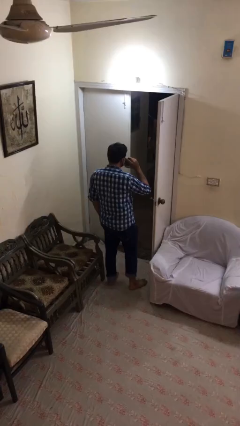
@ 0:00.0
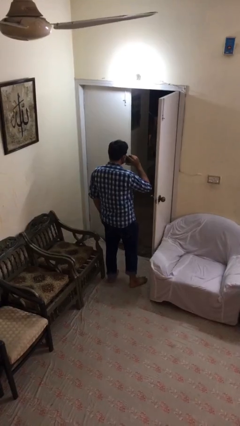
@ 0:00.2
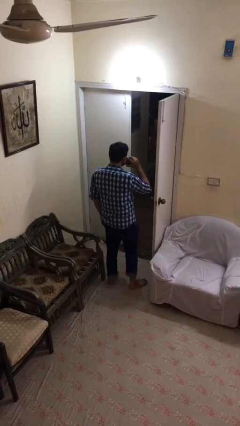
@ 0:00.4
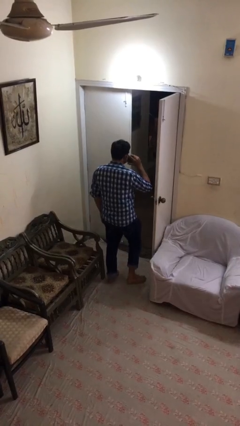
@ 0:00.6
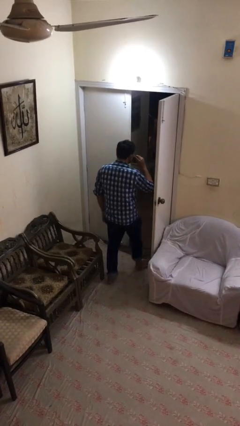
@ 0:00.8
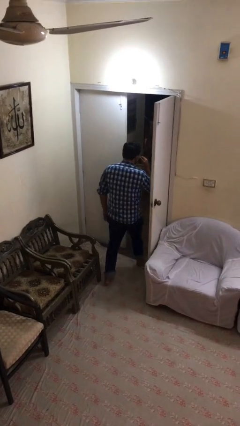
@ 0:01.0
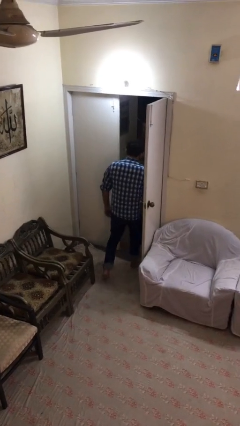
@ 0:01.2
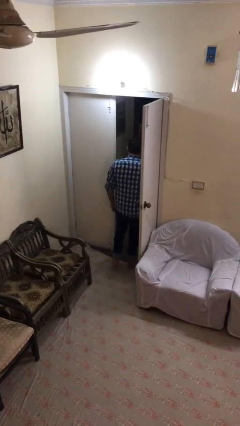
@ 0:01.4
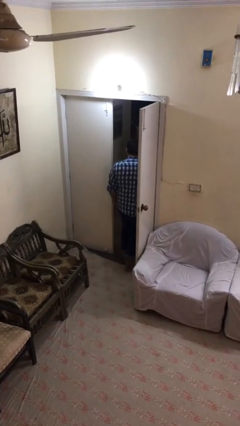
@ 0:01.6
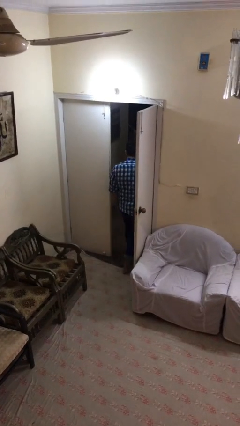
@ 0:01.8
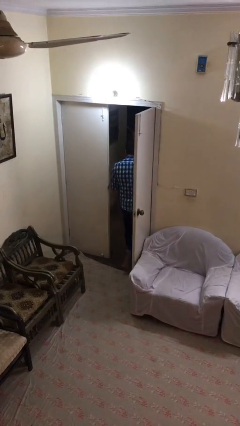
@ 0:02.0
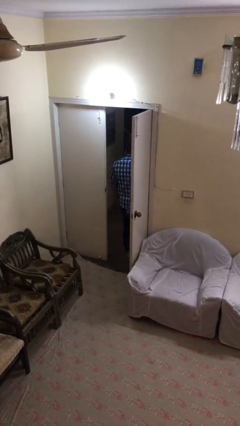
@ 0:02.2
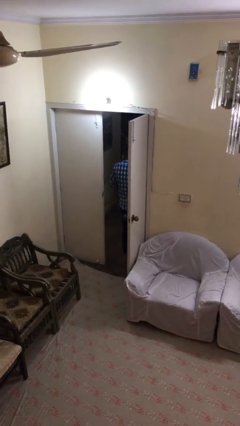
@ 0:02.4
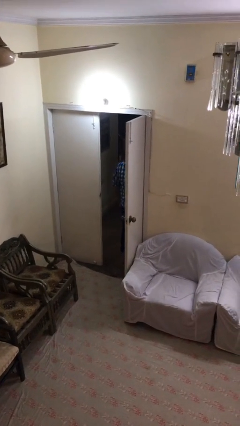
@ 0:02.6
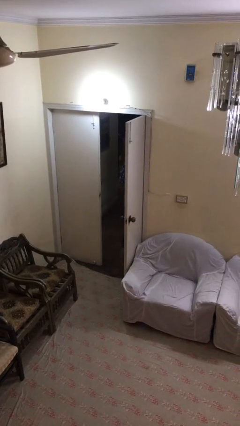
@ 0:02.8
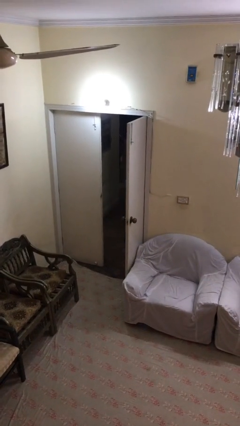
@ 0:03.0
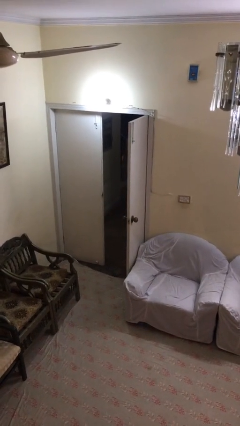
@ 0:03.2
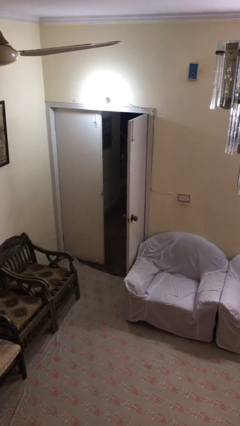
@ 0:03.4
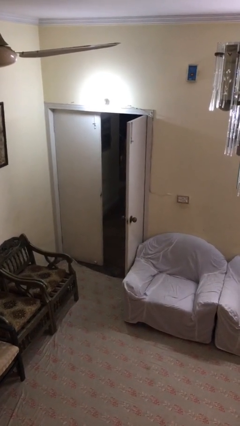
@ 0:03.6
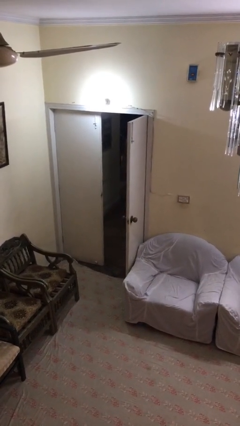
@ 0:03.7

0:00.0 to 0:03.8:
person exits scene through structure

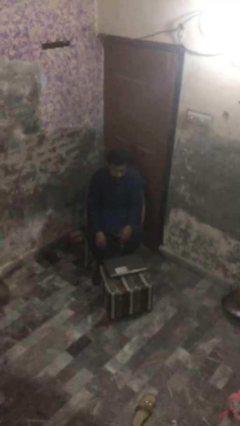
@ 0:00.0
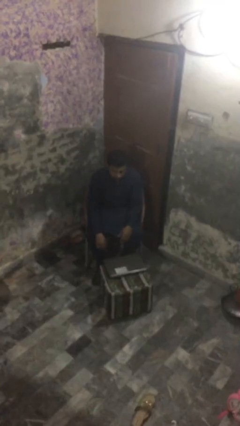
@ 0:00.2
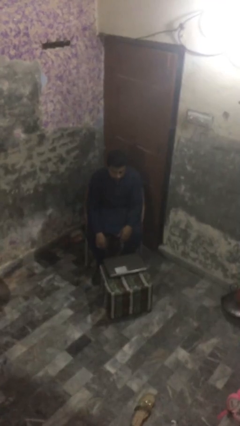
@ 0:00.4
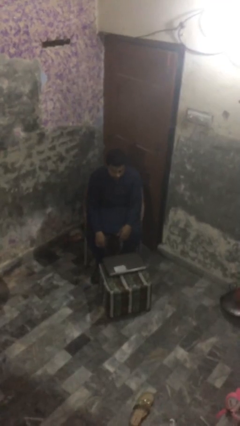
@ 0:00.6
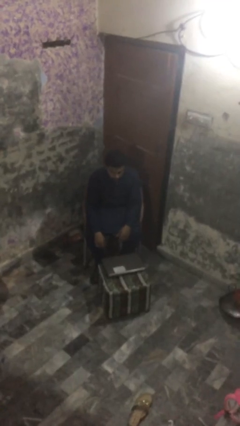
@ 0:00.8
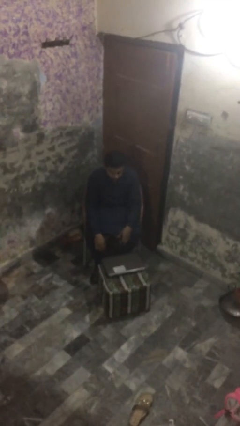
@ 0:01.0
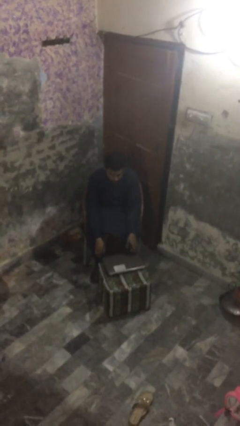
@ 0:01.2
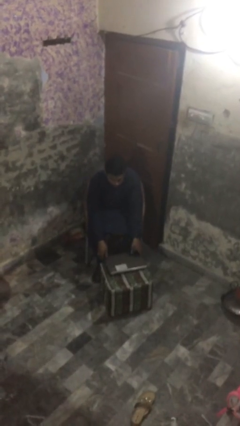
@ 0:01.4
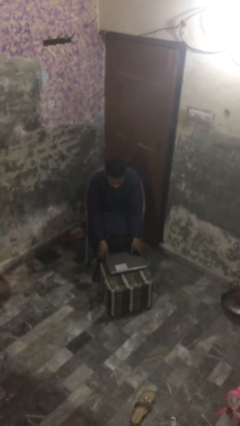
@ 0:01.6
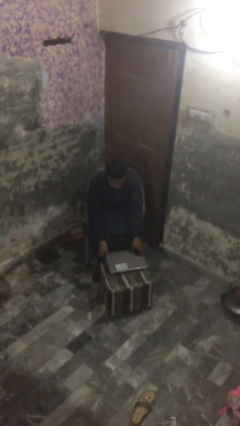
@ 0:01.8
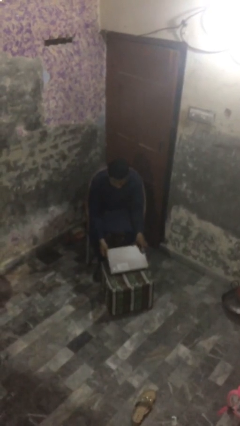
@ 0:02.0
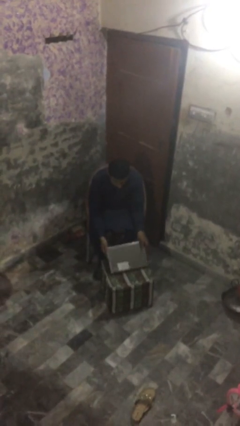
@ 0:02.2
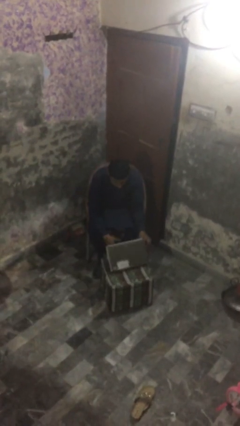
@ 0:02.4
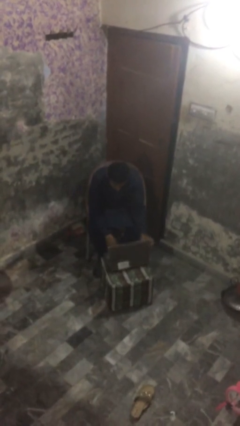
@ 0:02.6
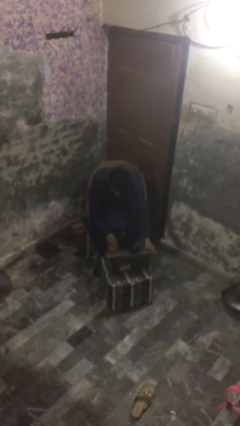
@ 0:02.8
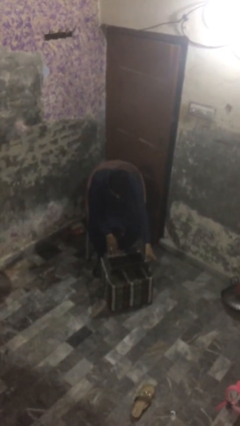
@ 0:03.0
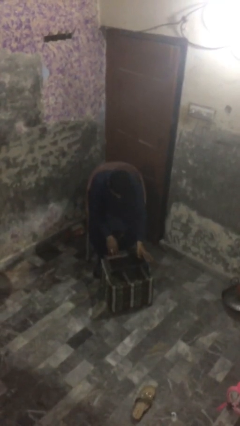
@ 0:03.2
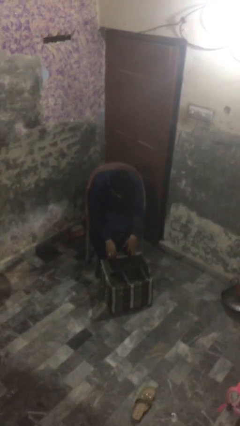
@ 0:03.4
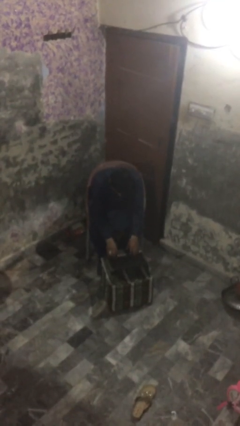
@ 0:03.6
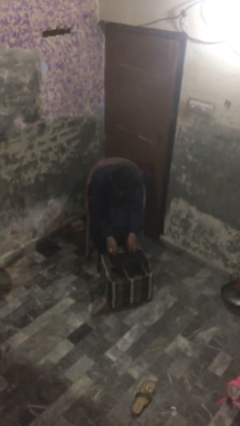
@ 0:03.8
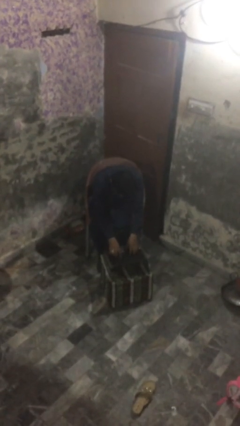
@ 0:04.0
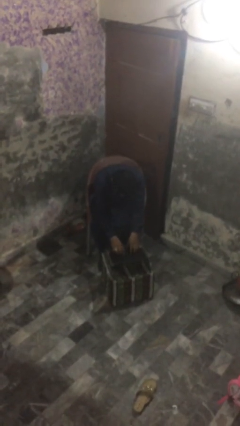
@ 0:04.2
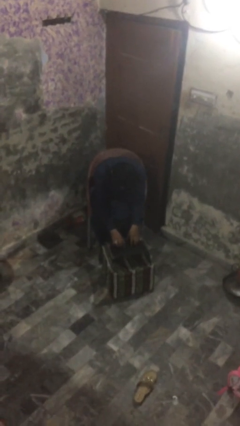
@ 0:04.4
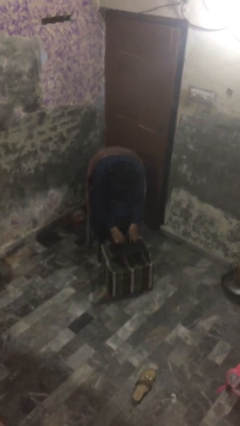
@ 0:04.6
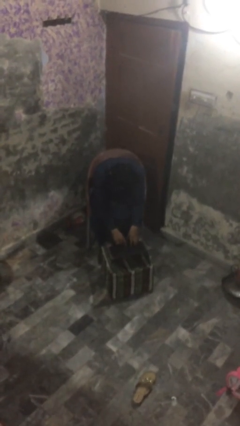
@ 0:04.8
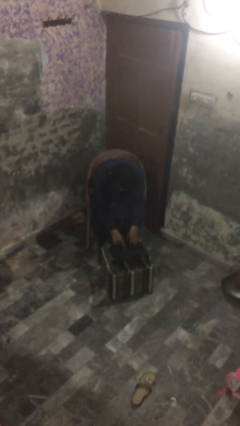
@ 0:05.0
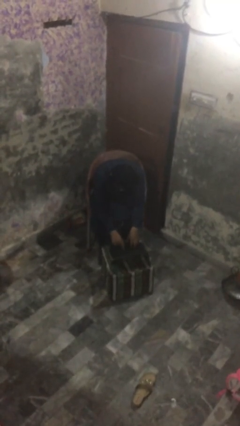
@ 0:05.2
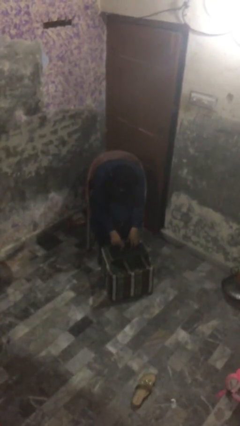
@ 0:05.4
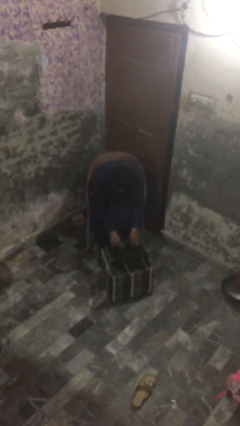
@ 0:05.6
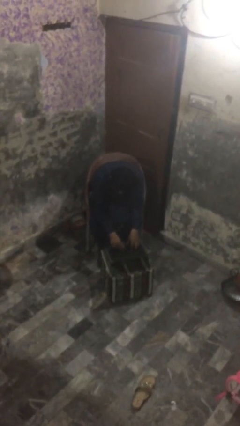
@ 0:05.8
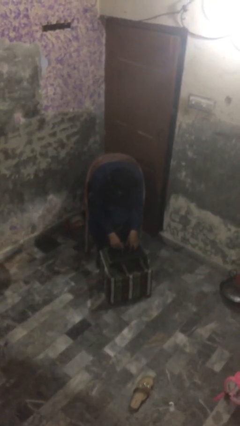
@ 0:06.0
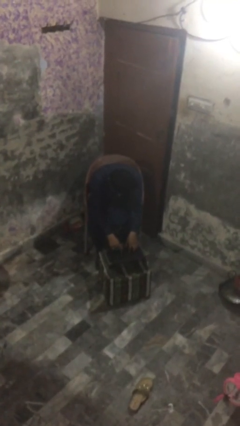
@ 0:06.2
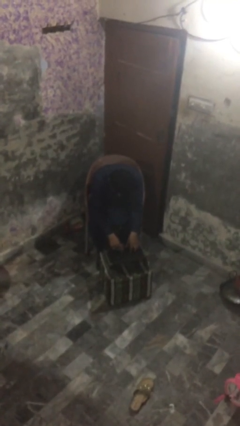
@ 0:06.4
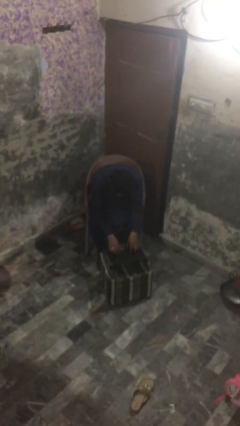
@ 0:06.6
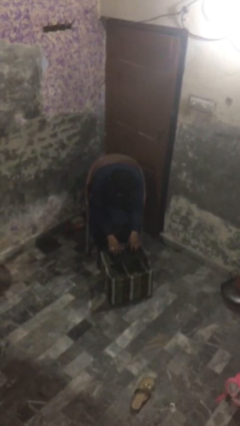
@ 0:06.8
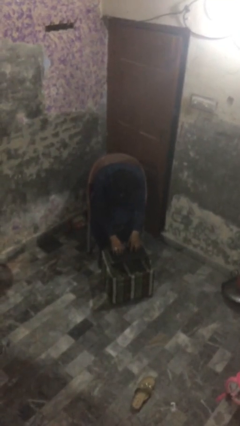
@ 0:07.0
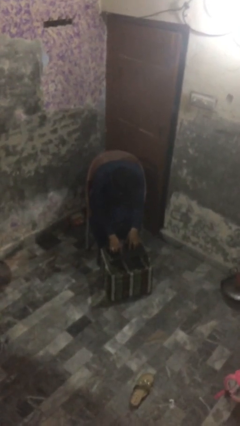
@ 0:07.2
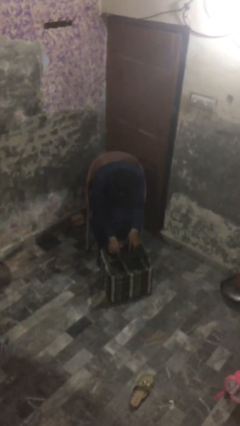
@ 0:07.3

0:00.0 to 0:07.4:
person interacts with laptop

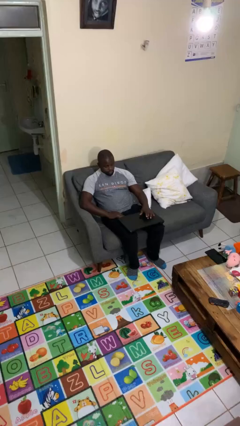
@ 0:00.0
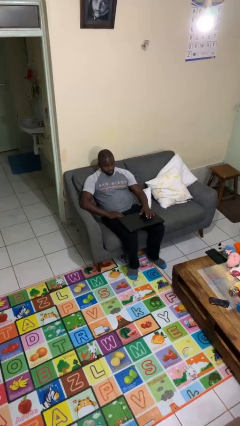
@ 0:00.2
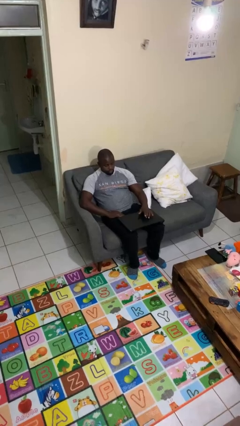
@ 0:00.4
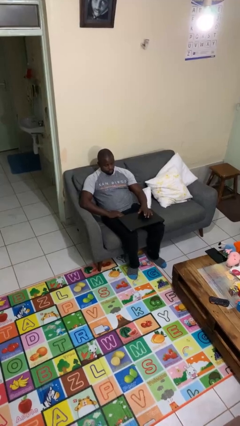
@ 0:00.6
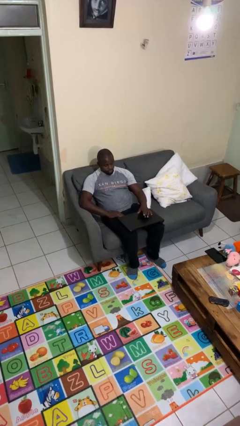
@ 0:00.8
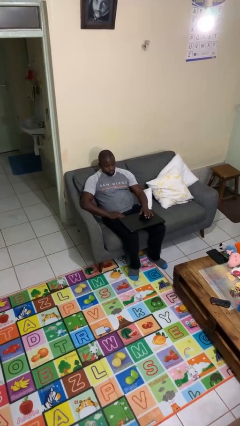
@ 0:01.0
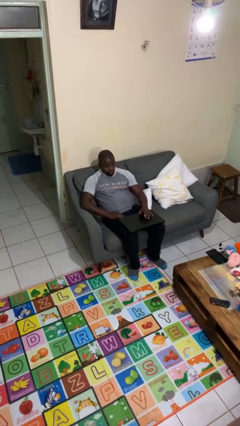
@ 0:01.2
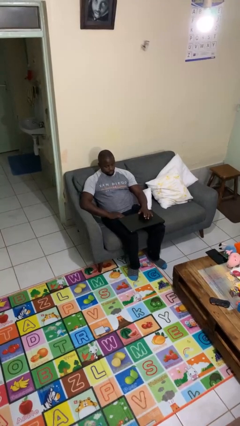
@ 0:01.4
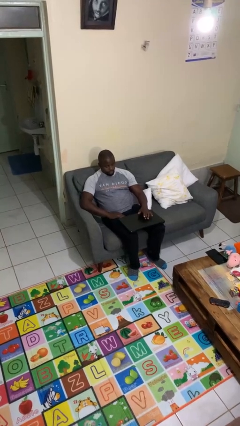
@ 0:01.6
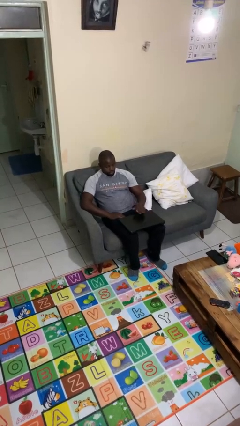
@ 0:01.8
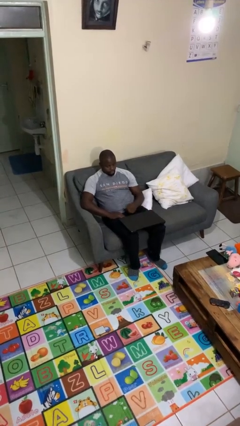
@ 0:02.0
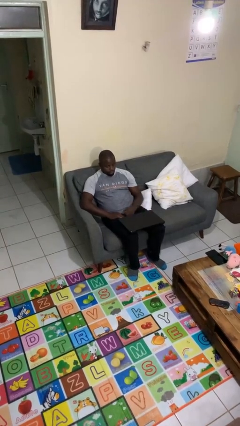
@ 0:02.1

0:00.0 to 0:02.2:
person taps object with finger

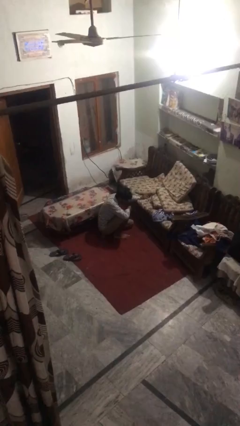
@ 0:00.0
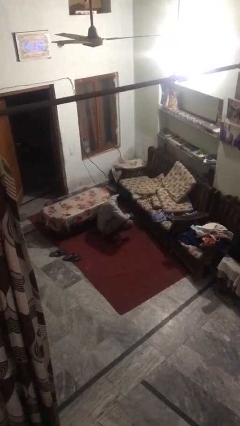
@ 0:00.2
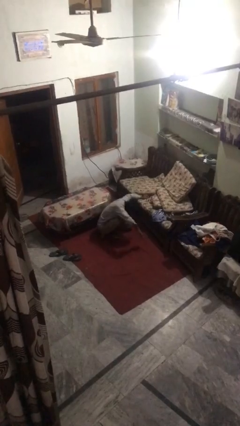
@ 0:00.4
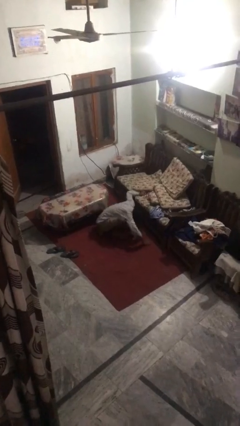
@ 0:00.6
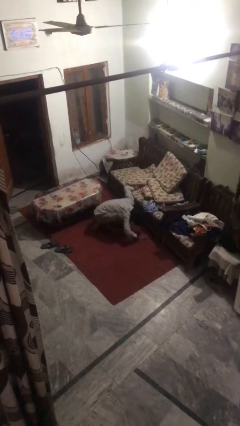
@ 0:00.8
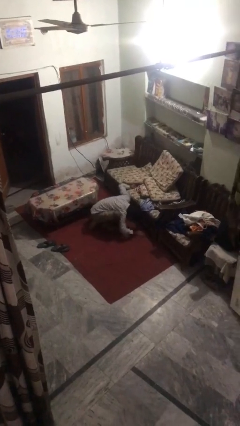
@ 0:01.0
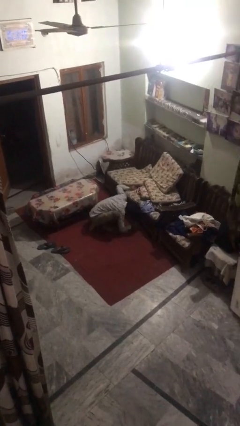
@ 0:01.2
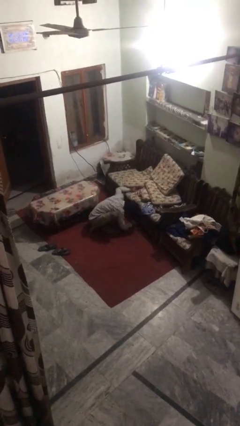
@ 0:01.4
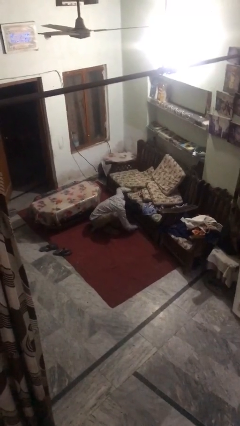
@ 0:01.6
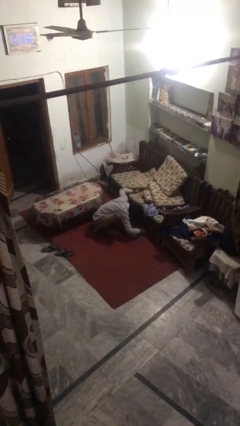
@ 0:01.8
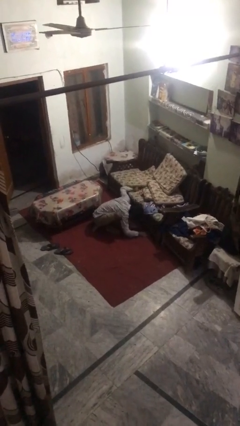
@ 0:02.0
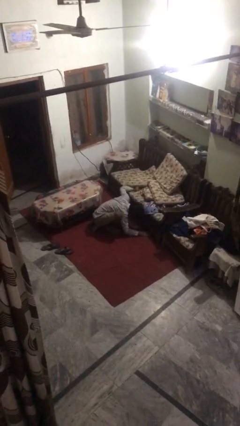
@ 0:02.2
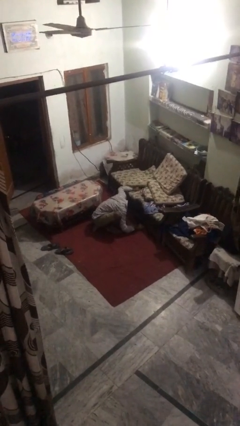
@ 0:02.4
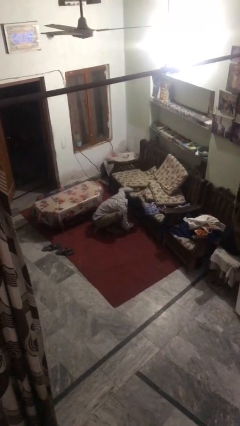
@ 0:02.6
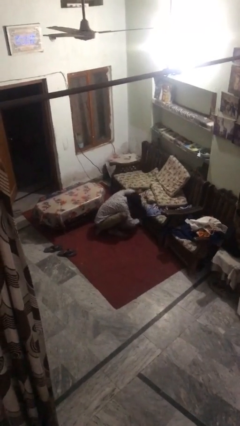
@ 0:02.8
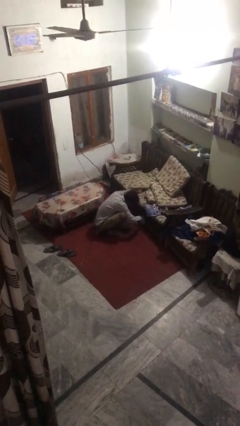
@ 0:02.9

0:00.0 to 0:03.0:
person searches under couch

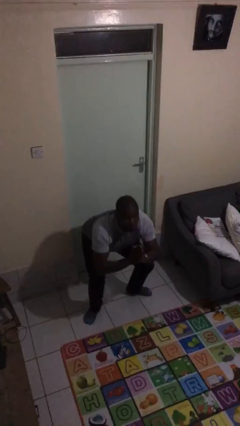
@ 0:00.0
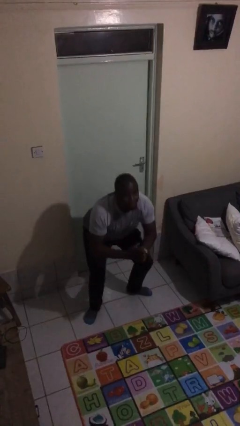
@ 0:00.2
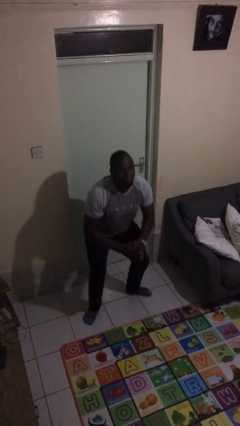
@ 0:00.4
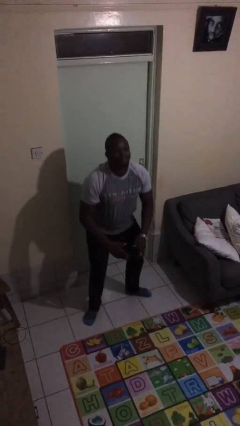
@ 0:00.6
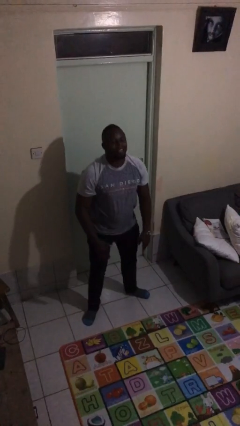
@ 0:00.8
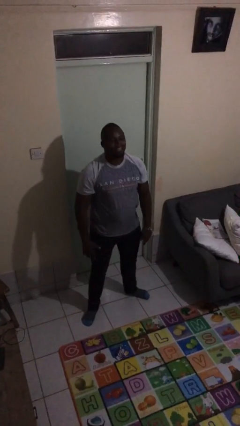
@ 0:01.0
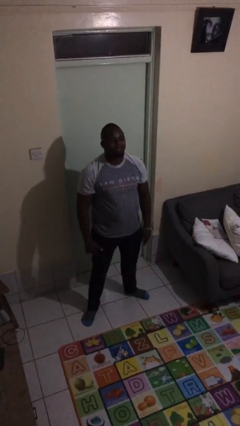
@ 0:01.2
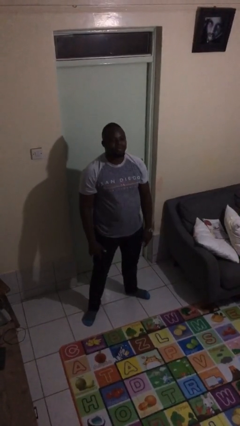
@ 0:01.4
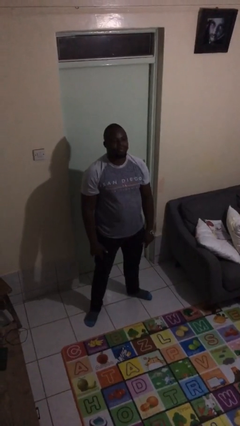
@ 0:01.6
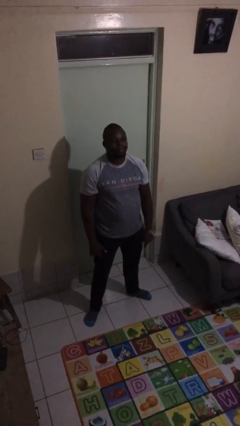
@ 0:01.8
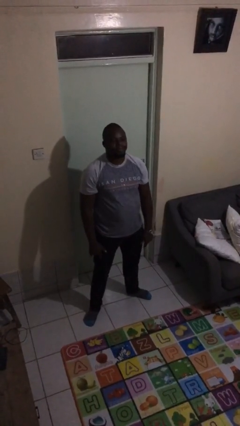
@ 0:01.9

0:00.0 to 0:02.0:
person stands up
